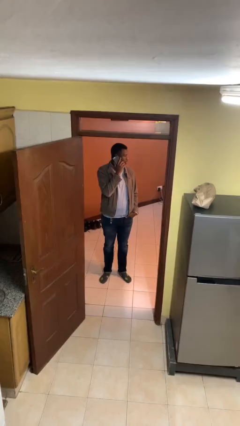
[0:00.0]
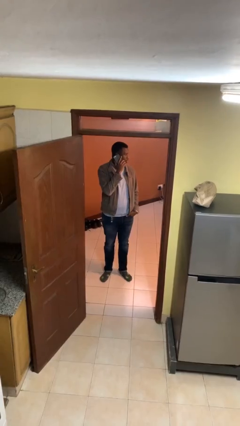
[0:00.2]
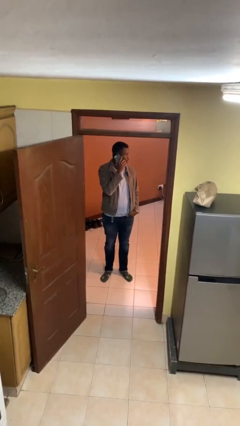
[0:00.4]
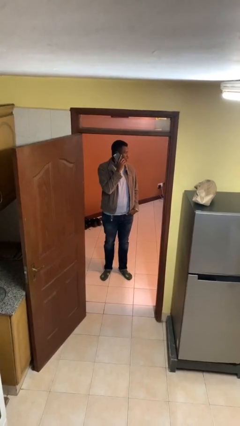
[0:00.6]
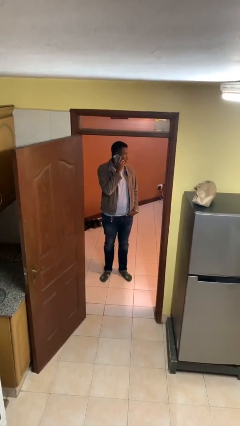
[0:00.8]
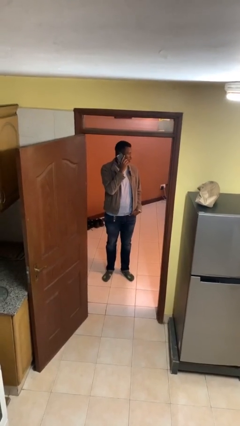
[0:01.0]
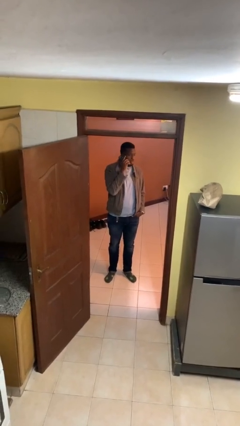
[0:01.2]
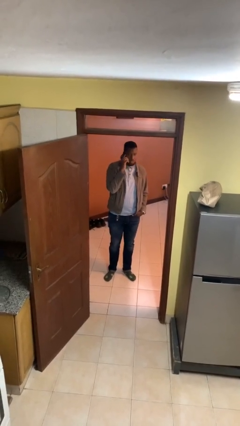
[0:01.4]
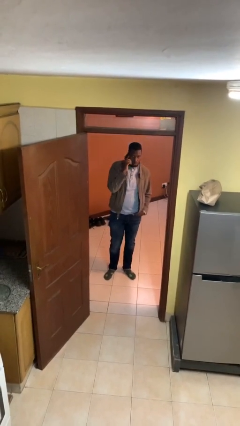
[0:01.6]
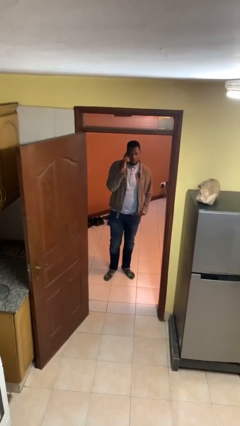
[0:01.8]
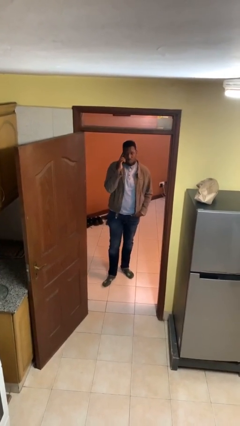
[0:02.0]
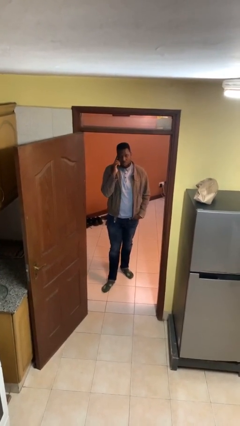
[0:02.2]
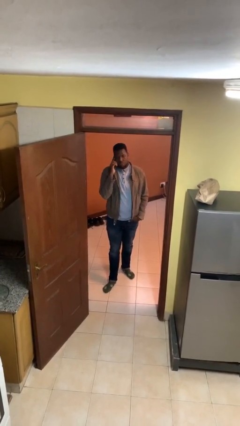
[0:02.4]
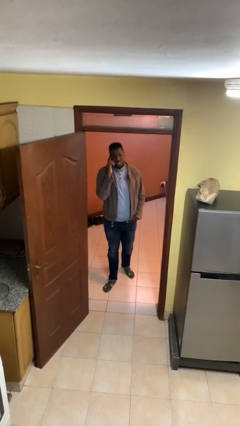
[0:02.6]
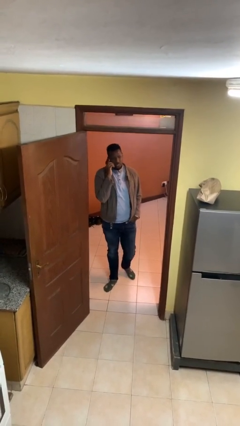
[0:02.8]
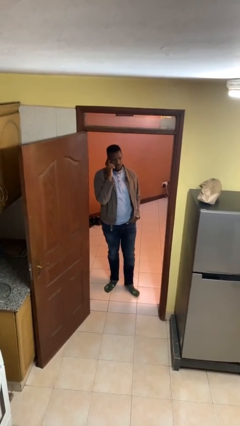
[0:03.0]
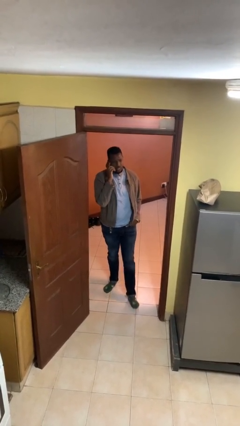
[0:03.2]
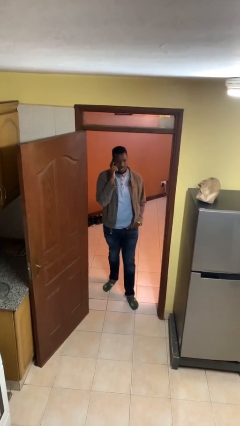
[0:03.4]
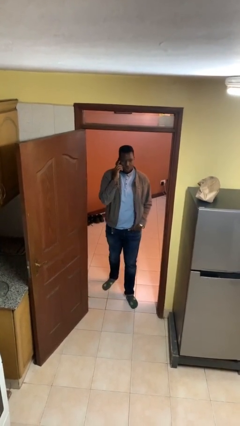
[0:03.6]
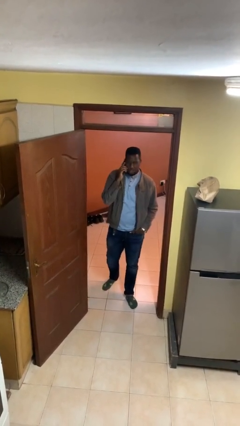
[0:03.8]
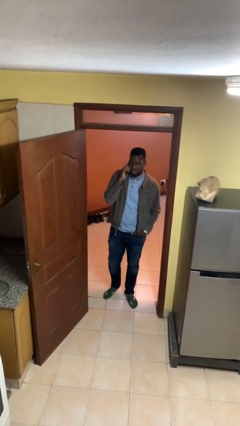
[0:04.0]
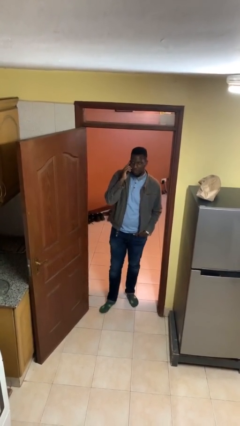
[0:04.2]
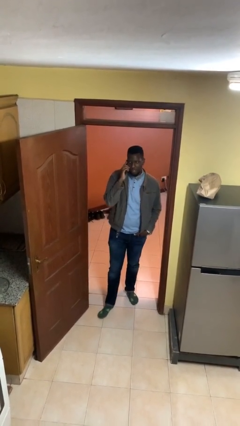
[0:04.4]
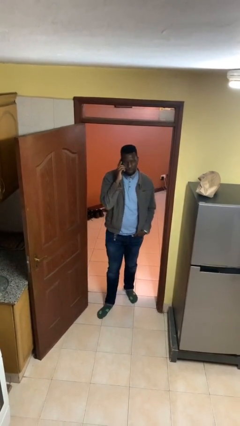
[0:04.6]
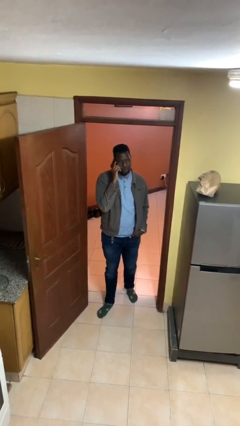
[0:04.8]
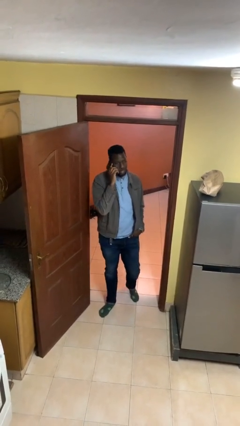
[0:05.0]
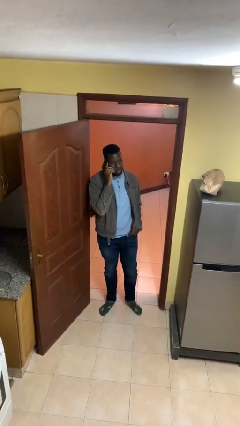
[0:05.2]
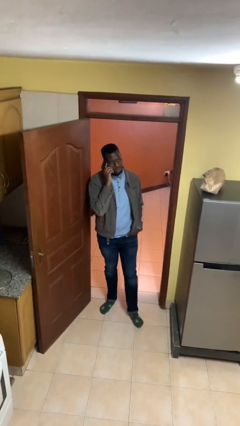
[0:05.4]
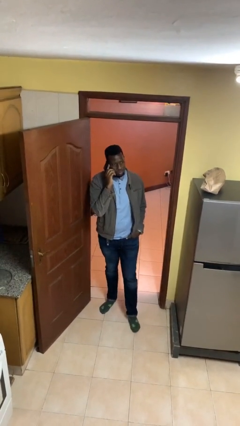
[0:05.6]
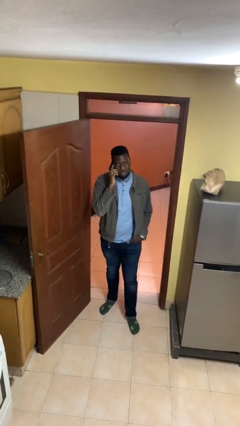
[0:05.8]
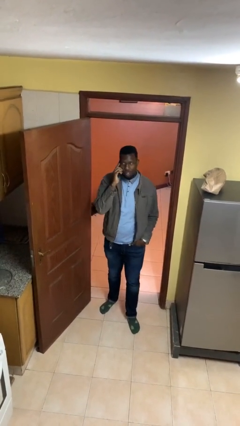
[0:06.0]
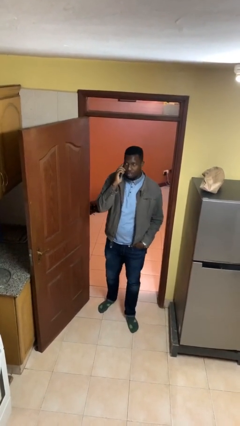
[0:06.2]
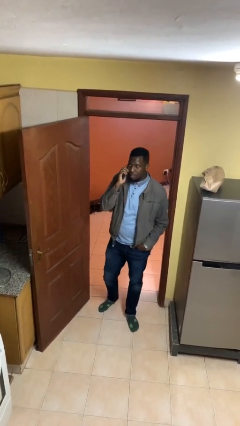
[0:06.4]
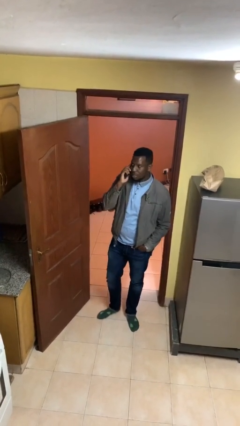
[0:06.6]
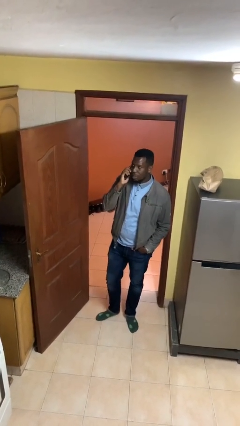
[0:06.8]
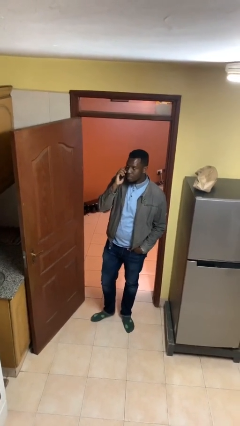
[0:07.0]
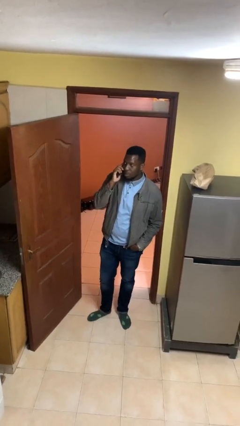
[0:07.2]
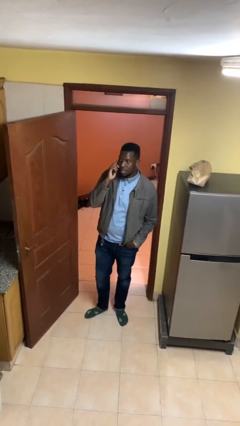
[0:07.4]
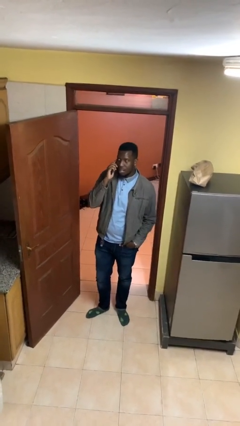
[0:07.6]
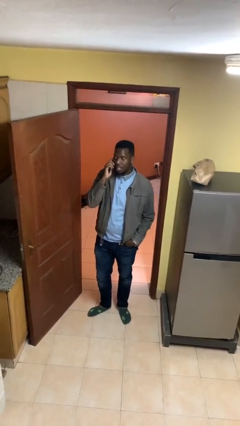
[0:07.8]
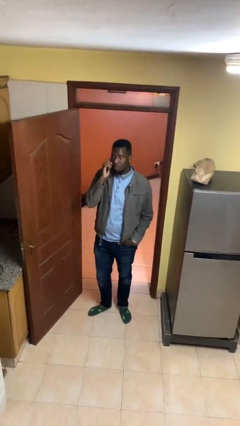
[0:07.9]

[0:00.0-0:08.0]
person enters scene through structure

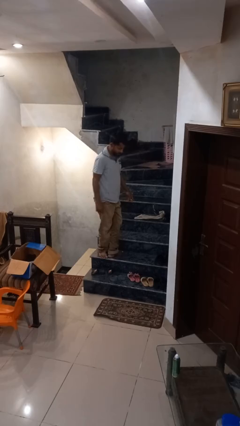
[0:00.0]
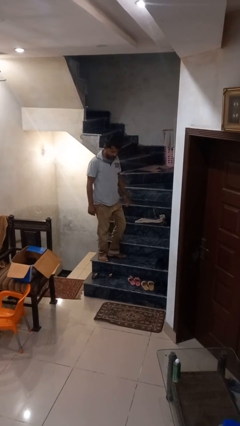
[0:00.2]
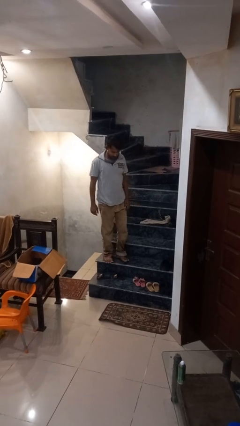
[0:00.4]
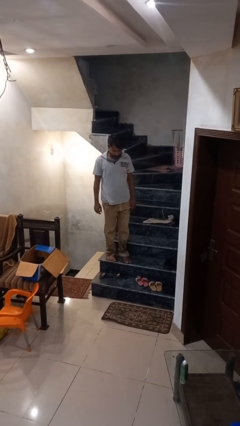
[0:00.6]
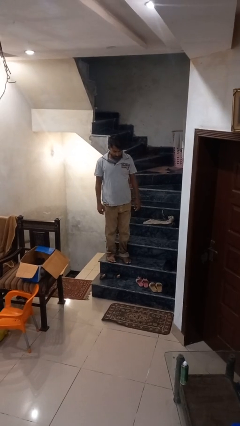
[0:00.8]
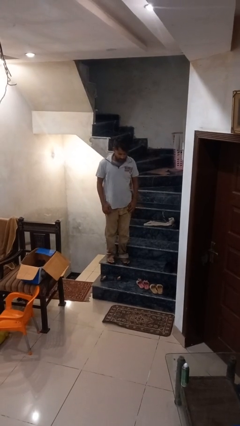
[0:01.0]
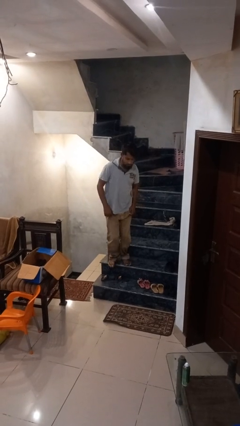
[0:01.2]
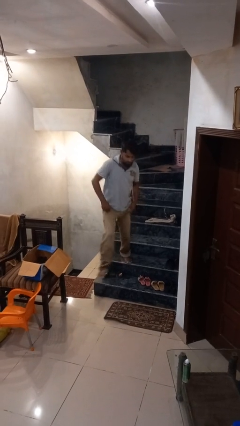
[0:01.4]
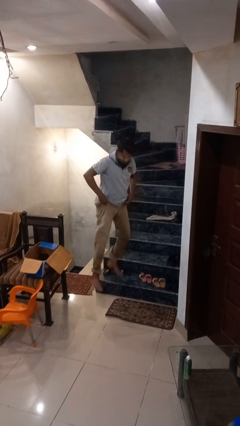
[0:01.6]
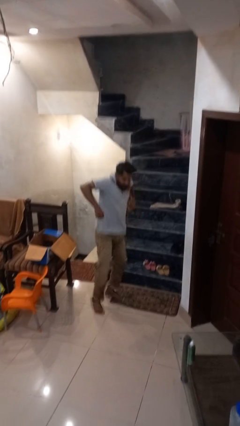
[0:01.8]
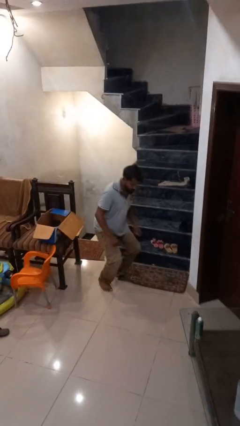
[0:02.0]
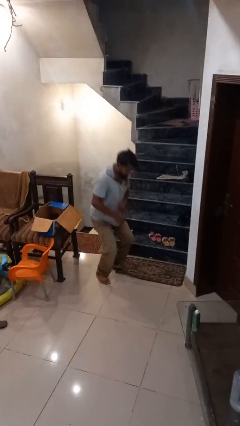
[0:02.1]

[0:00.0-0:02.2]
person climbs down stairs

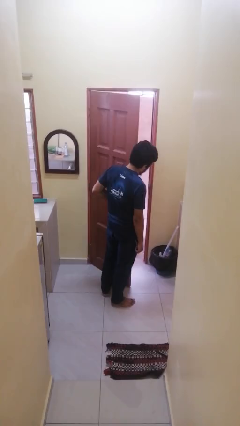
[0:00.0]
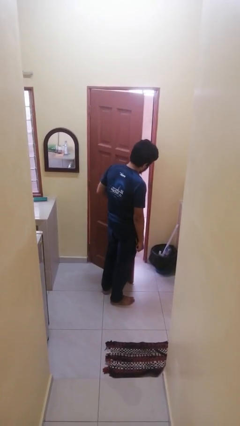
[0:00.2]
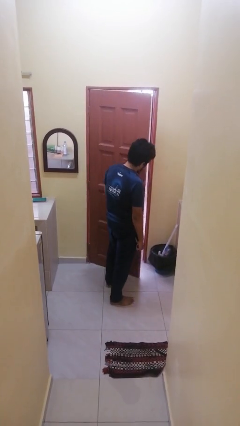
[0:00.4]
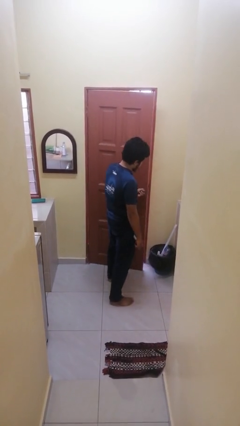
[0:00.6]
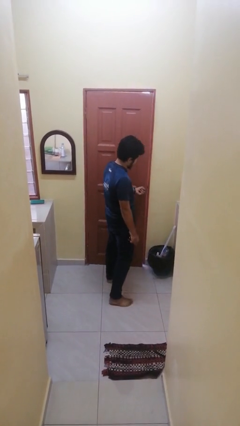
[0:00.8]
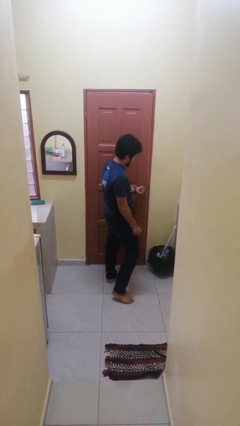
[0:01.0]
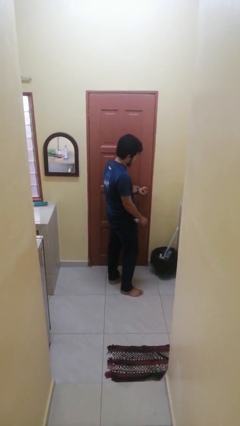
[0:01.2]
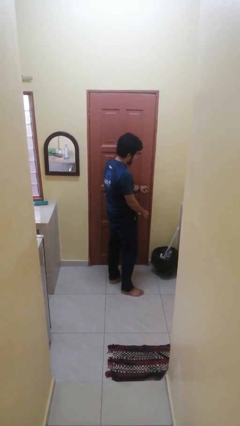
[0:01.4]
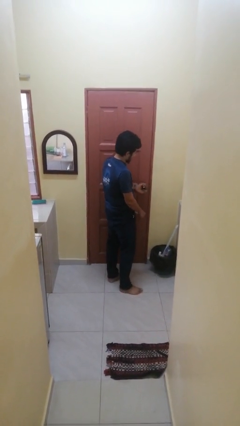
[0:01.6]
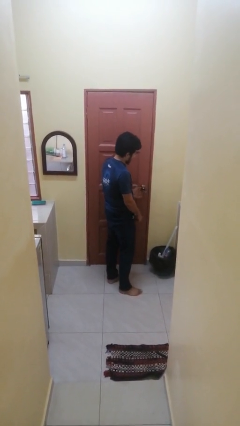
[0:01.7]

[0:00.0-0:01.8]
person closes facility door

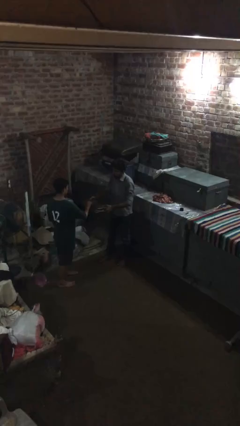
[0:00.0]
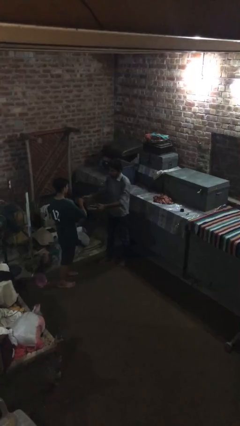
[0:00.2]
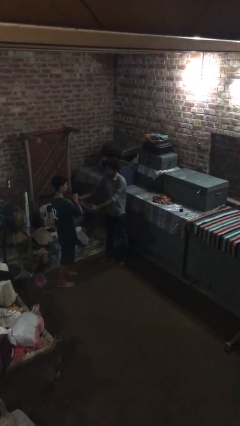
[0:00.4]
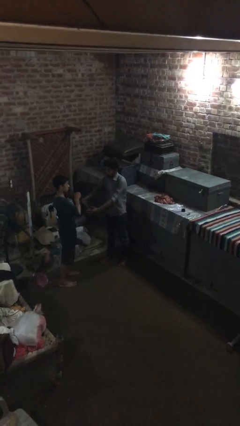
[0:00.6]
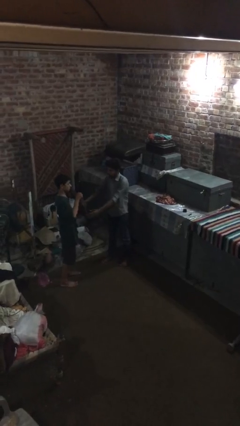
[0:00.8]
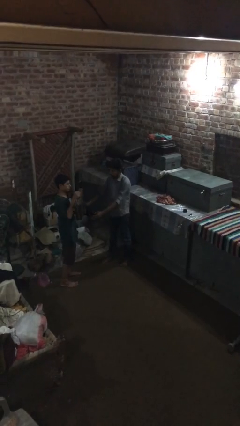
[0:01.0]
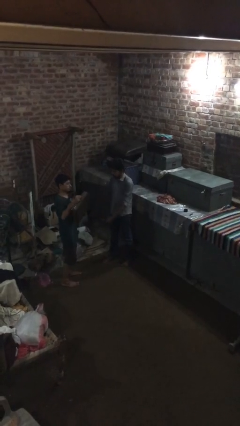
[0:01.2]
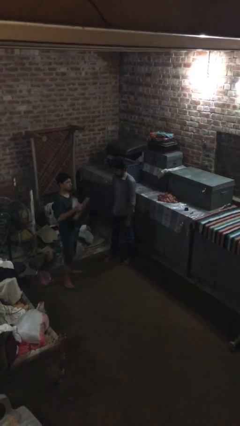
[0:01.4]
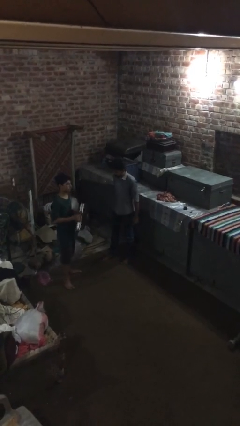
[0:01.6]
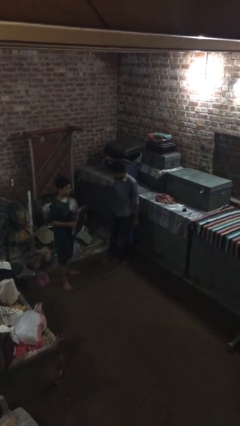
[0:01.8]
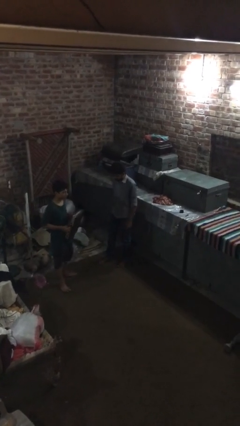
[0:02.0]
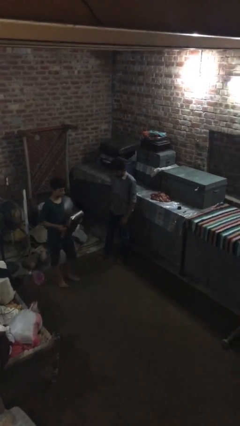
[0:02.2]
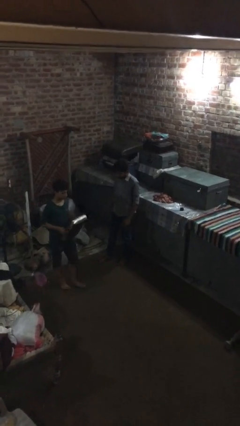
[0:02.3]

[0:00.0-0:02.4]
person transfers object to person

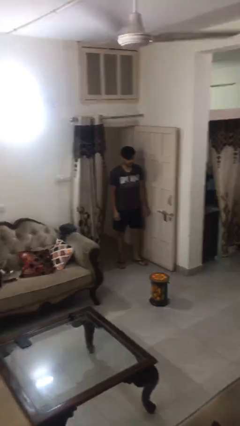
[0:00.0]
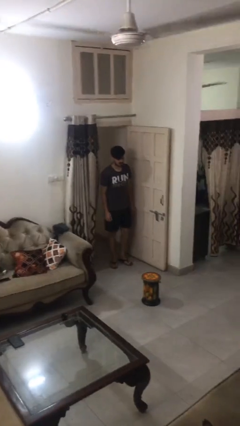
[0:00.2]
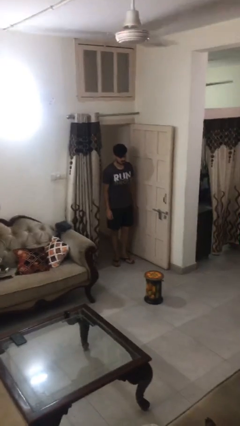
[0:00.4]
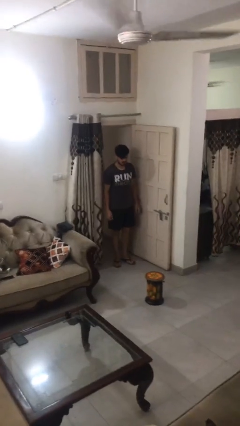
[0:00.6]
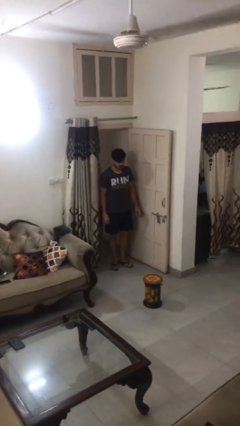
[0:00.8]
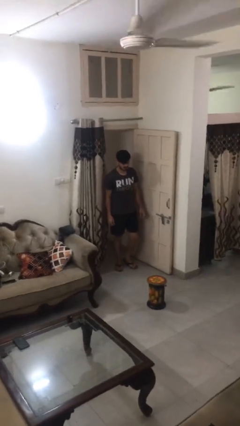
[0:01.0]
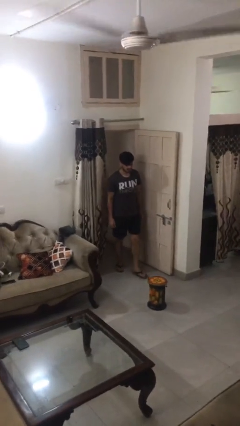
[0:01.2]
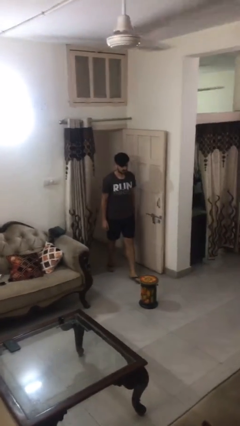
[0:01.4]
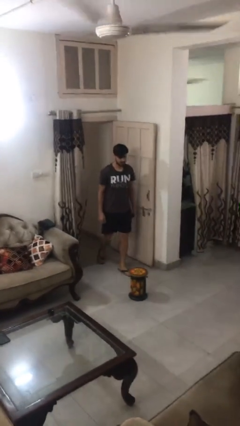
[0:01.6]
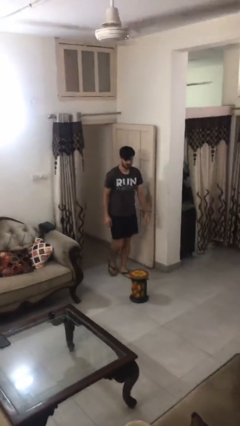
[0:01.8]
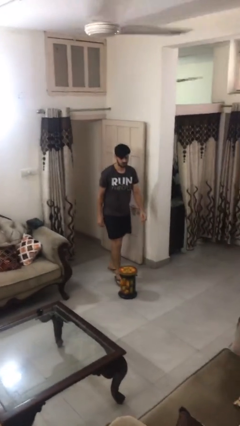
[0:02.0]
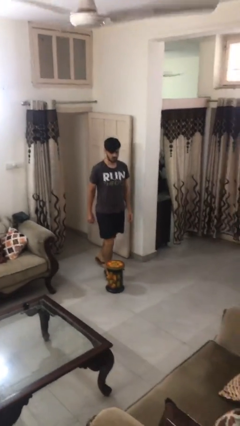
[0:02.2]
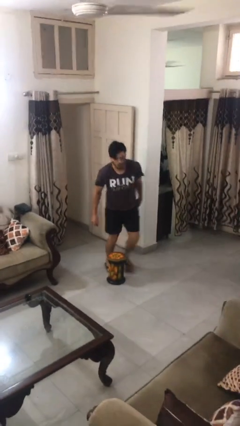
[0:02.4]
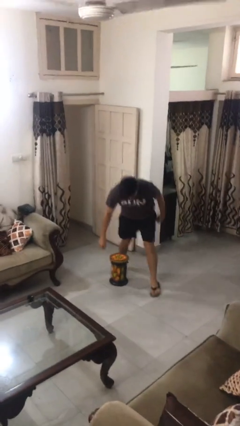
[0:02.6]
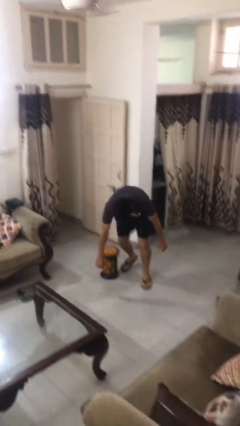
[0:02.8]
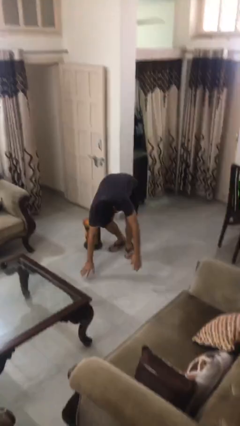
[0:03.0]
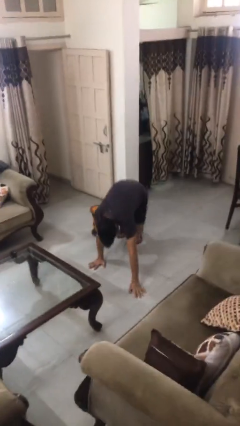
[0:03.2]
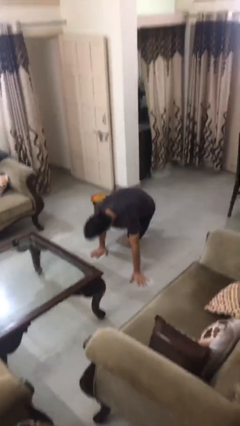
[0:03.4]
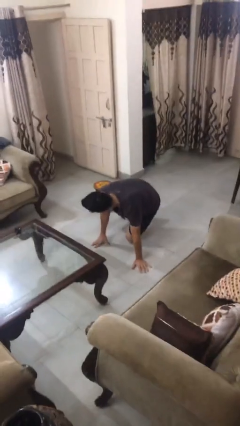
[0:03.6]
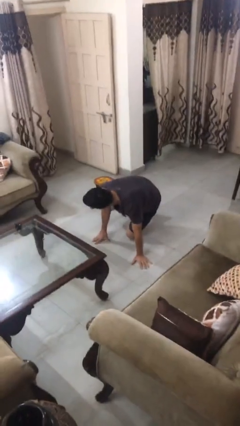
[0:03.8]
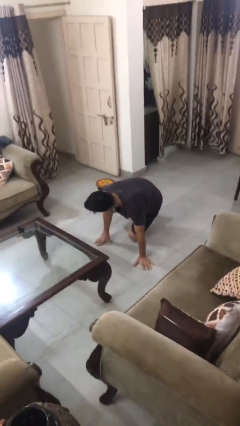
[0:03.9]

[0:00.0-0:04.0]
person trips on object on floor
